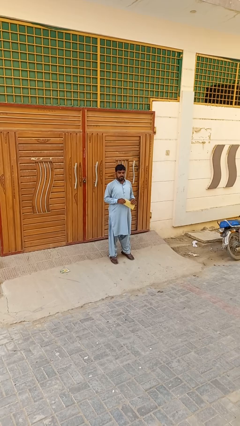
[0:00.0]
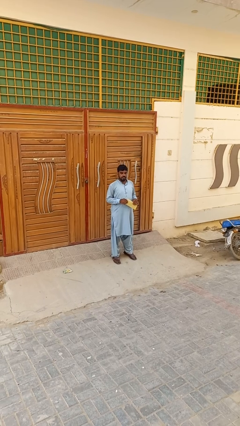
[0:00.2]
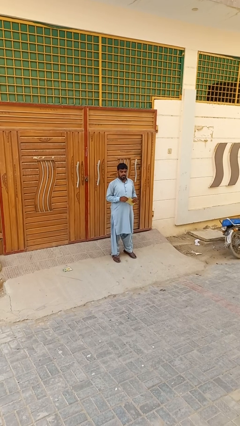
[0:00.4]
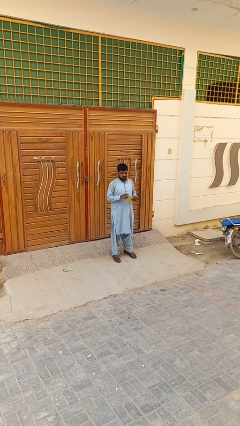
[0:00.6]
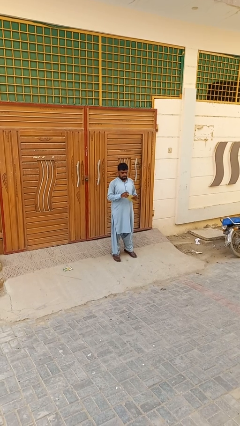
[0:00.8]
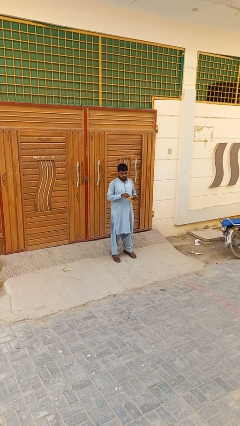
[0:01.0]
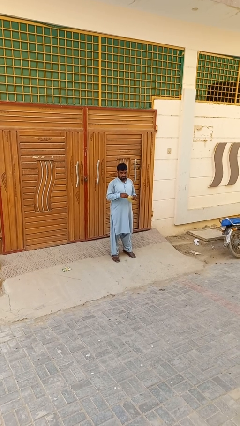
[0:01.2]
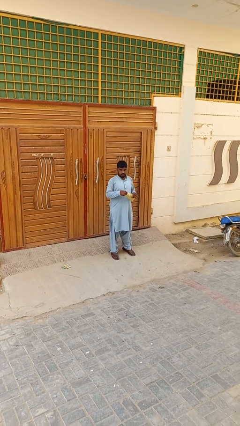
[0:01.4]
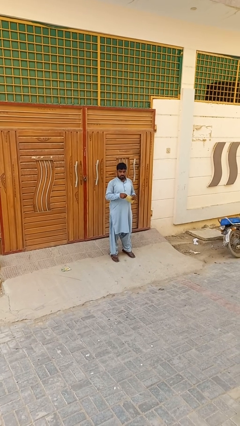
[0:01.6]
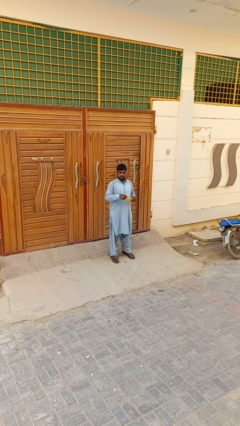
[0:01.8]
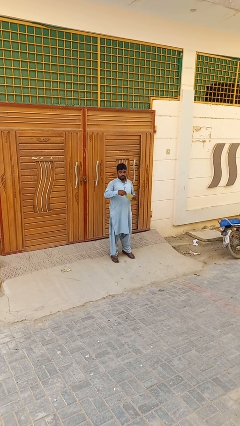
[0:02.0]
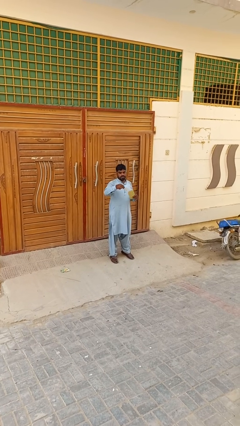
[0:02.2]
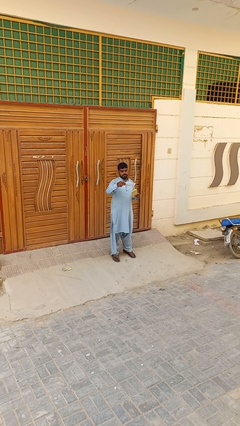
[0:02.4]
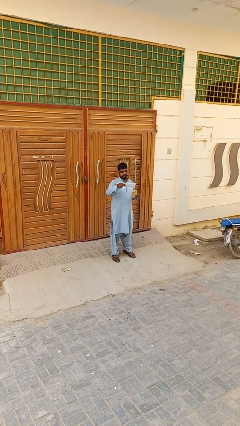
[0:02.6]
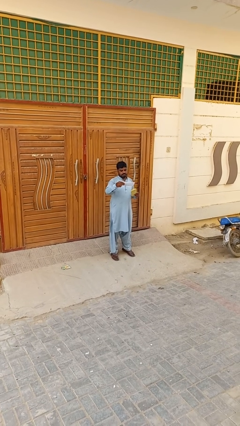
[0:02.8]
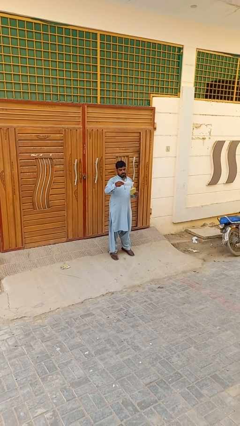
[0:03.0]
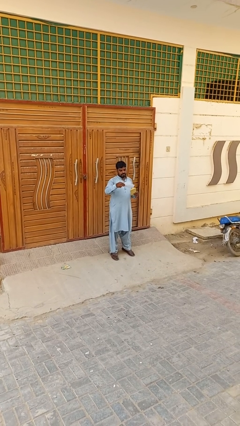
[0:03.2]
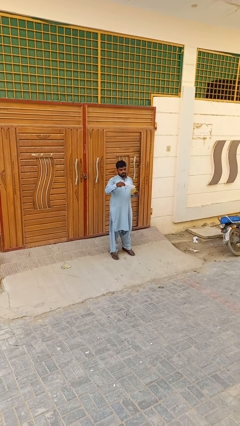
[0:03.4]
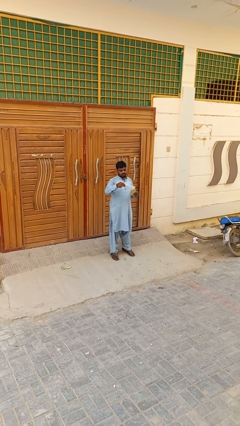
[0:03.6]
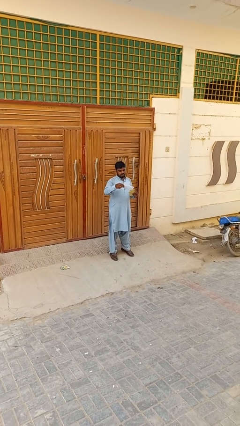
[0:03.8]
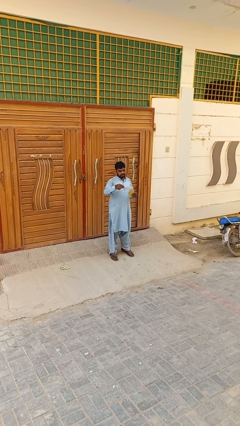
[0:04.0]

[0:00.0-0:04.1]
person opens mailbox

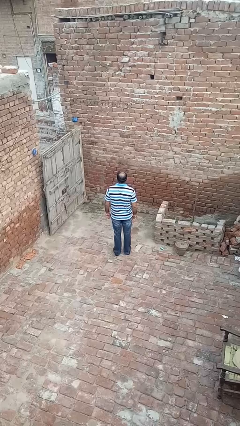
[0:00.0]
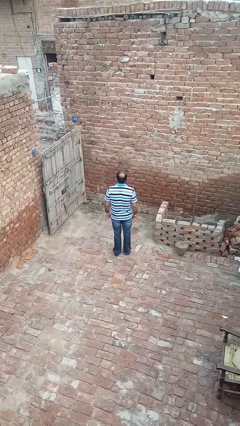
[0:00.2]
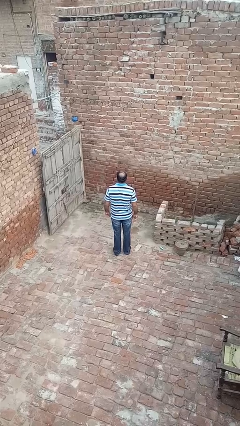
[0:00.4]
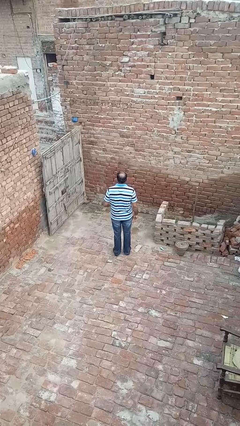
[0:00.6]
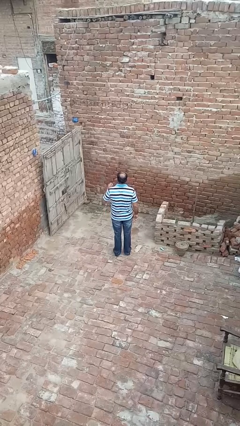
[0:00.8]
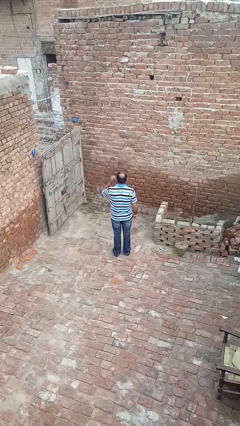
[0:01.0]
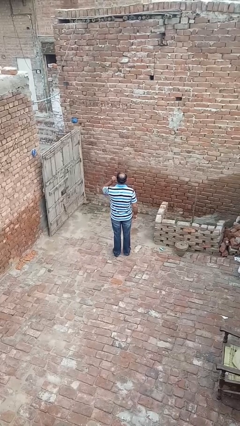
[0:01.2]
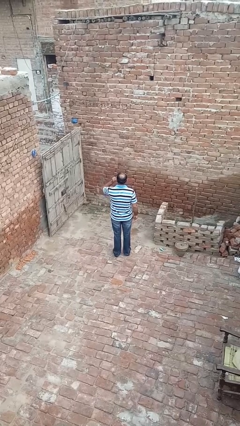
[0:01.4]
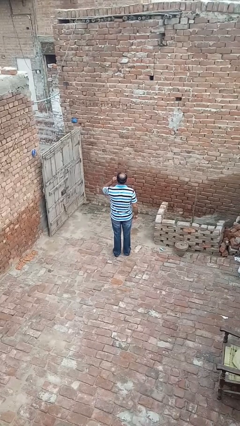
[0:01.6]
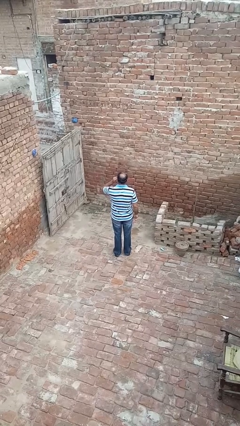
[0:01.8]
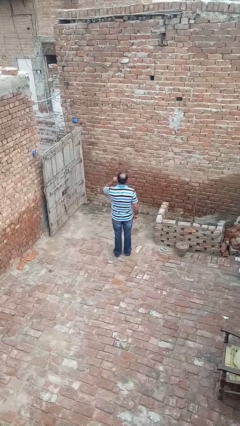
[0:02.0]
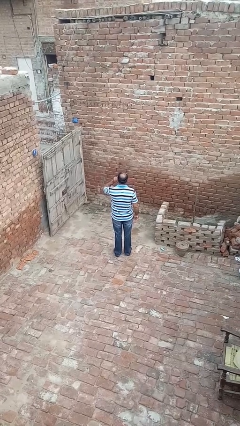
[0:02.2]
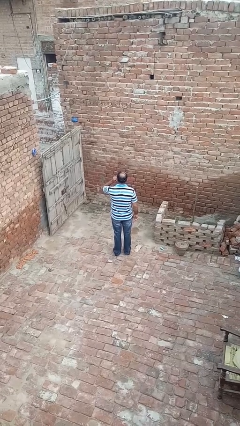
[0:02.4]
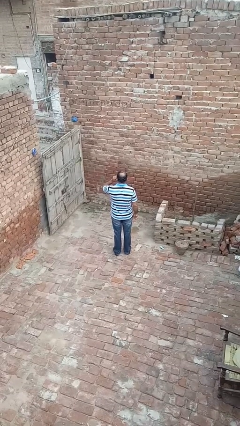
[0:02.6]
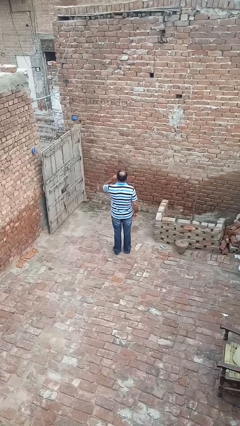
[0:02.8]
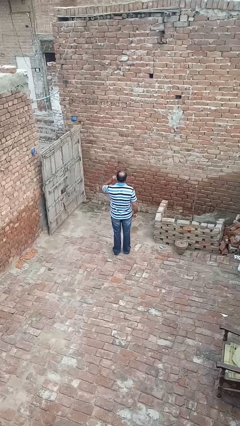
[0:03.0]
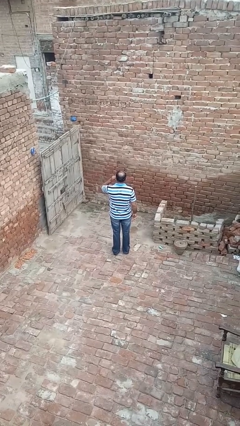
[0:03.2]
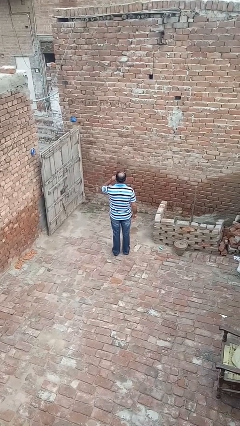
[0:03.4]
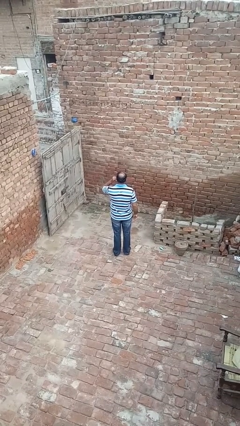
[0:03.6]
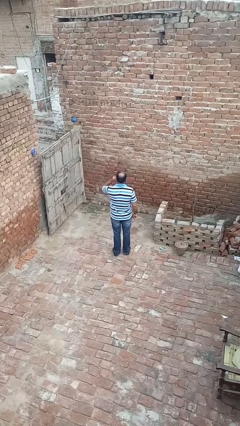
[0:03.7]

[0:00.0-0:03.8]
person touches earlobe

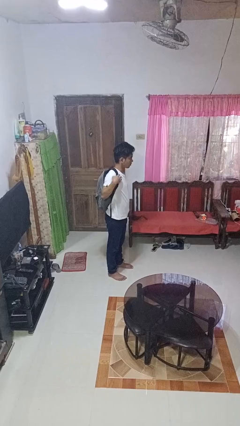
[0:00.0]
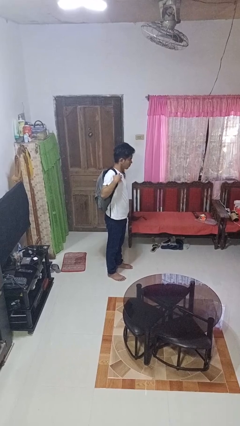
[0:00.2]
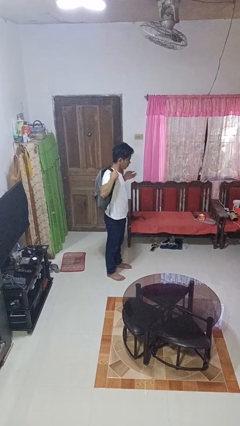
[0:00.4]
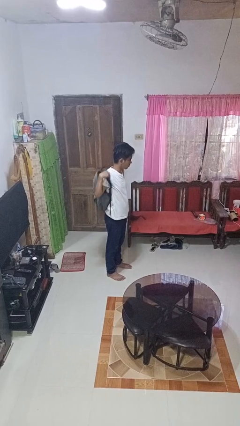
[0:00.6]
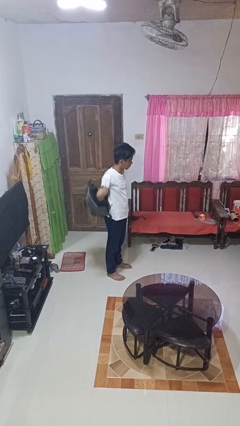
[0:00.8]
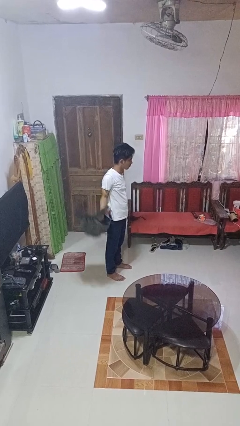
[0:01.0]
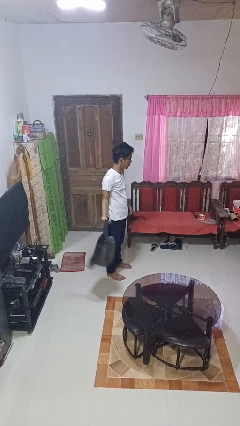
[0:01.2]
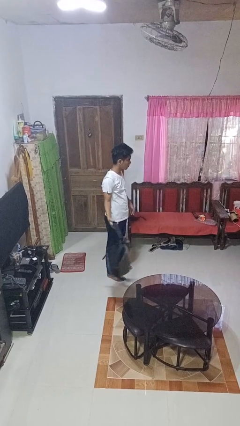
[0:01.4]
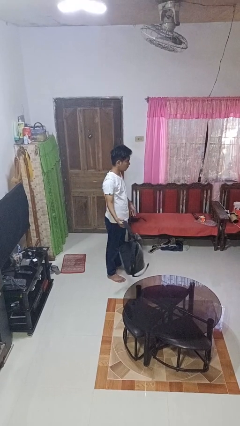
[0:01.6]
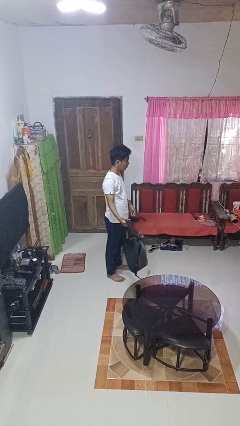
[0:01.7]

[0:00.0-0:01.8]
person takes off backpack

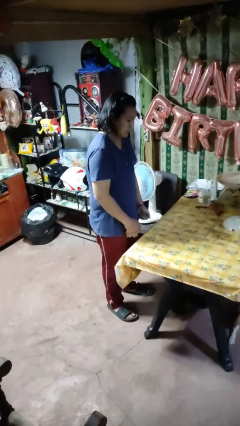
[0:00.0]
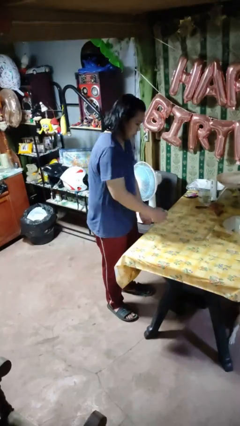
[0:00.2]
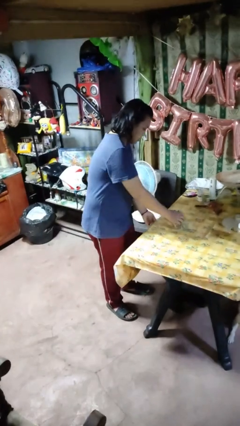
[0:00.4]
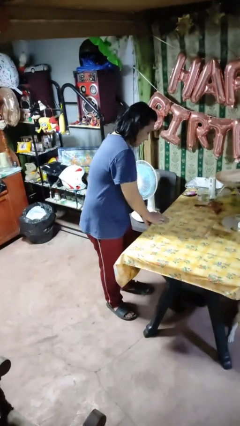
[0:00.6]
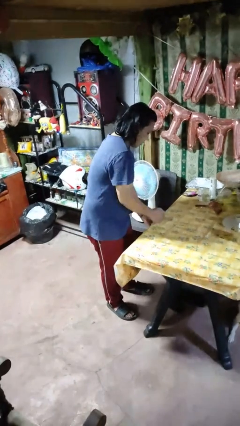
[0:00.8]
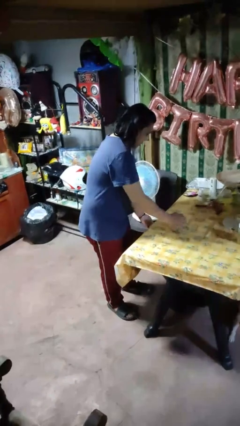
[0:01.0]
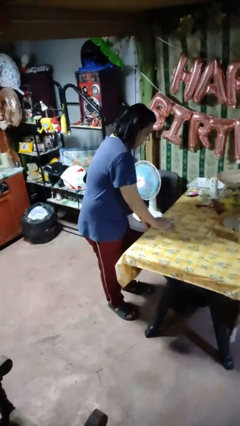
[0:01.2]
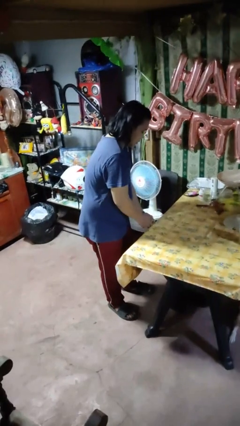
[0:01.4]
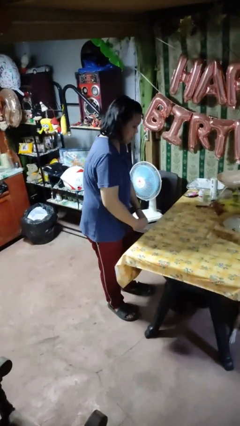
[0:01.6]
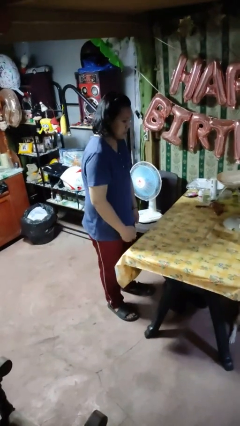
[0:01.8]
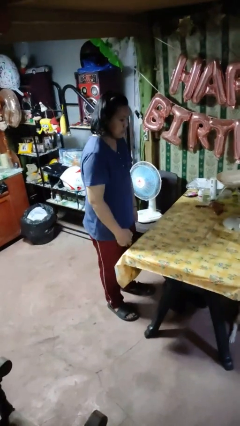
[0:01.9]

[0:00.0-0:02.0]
person cleans table with rag

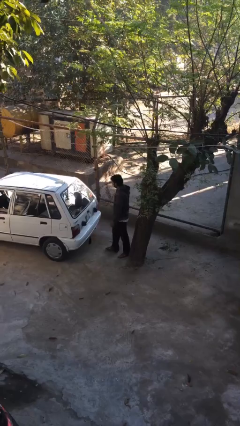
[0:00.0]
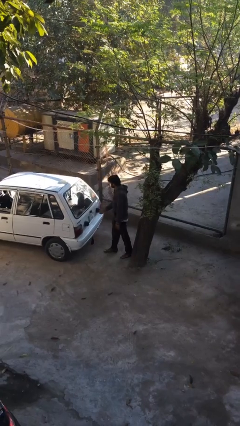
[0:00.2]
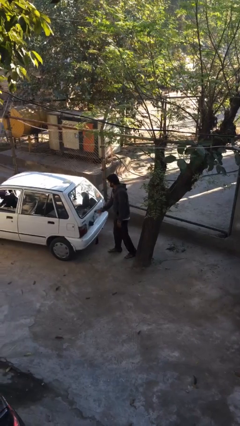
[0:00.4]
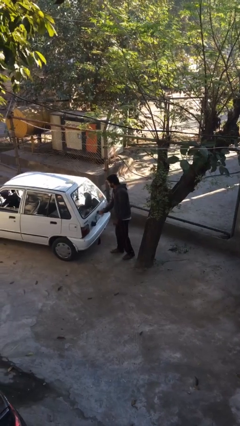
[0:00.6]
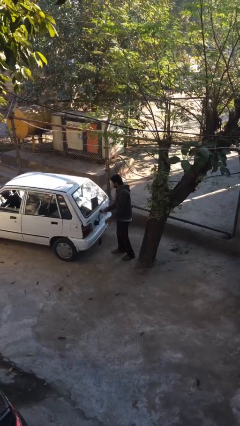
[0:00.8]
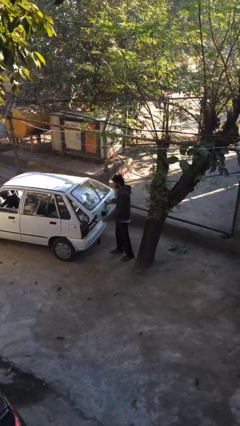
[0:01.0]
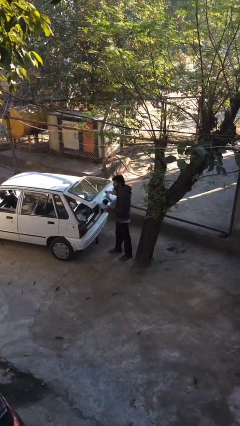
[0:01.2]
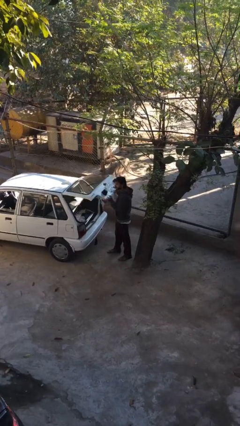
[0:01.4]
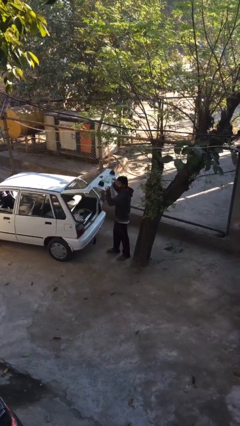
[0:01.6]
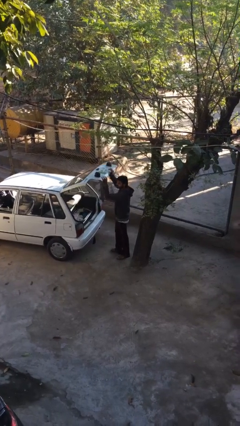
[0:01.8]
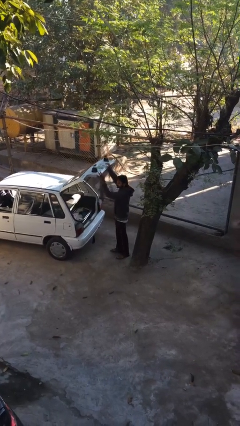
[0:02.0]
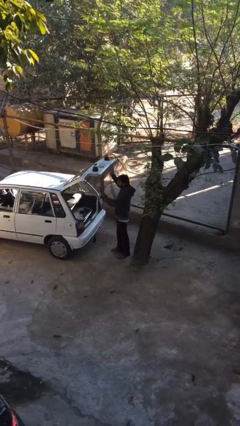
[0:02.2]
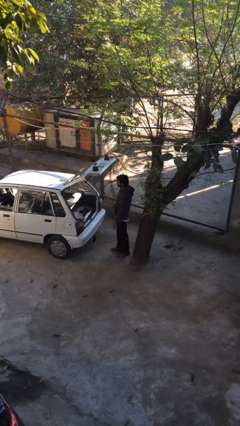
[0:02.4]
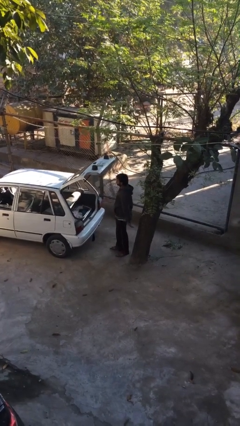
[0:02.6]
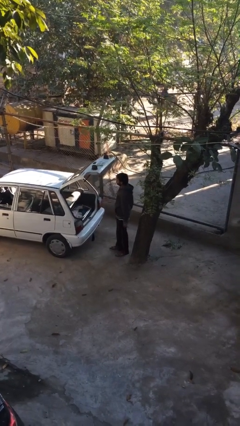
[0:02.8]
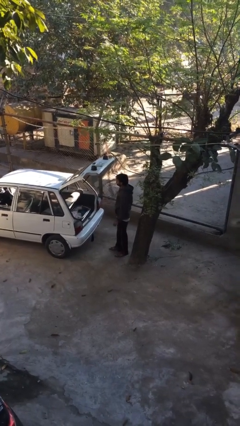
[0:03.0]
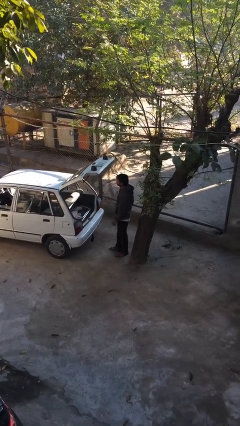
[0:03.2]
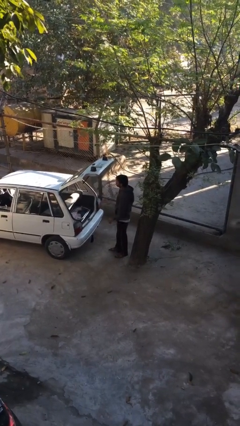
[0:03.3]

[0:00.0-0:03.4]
person opens car trunk

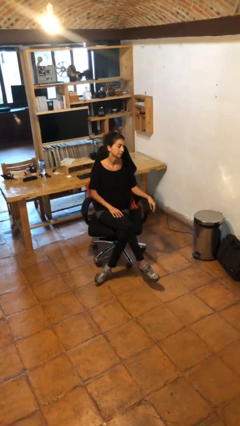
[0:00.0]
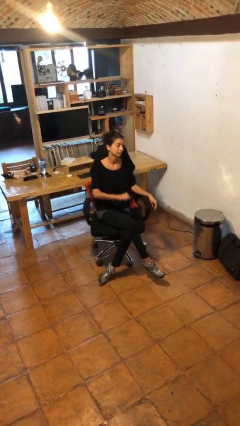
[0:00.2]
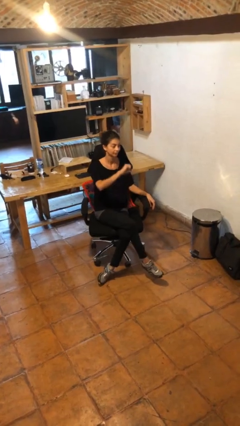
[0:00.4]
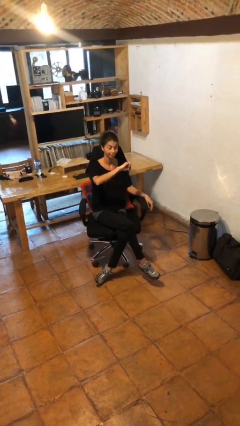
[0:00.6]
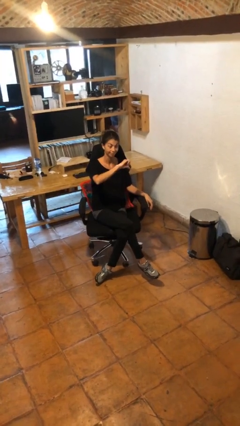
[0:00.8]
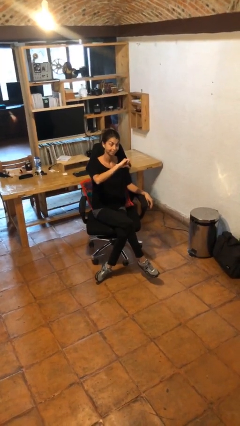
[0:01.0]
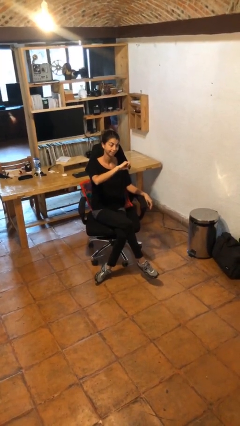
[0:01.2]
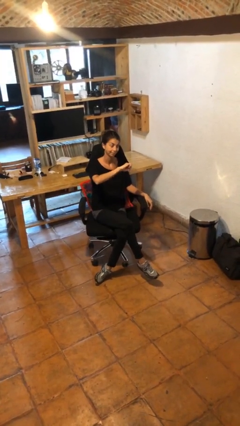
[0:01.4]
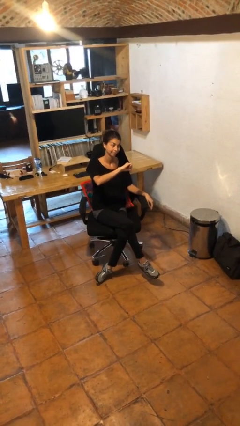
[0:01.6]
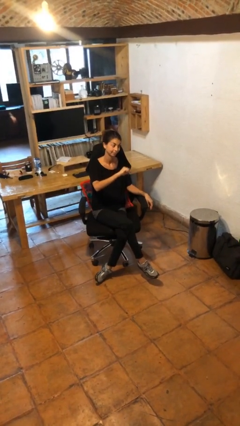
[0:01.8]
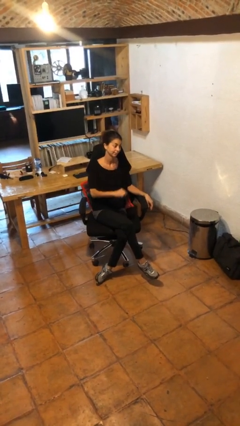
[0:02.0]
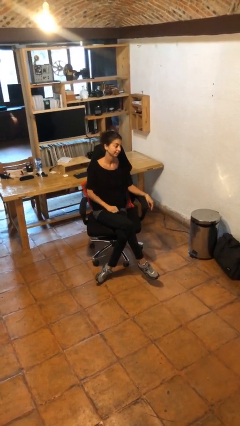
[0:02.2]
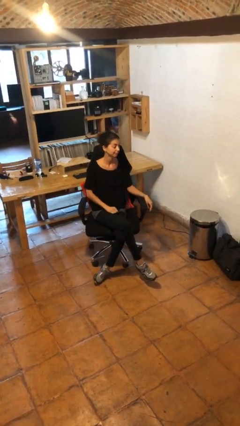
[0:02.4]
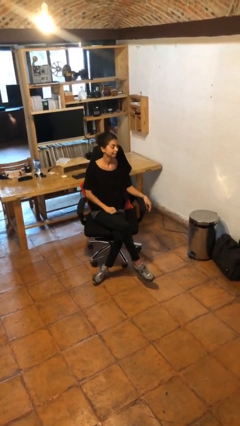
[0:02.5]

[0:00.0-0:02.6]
person gestures thumbs down
